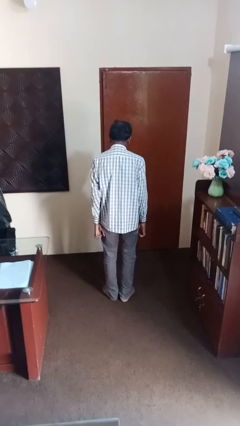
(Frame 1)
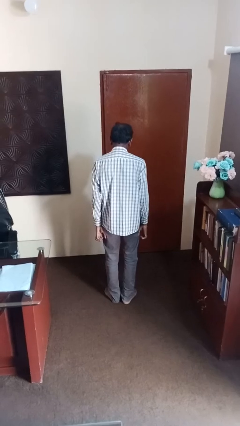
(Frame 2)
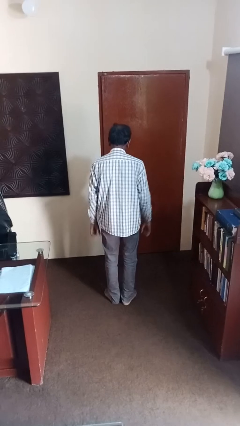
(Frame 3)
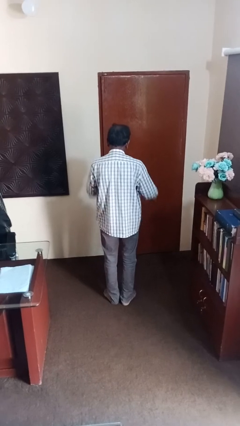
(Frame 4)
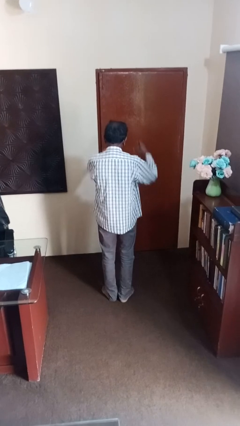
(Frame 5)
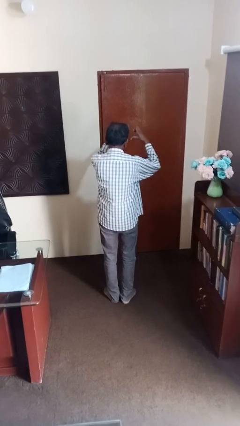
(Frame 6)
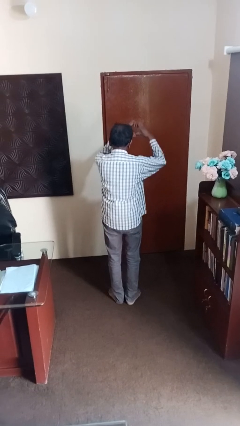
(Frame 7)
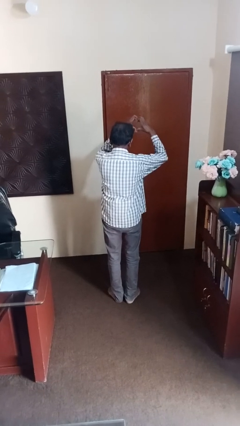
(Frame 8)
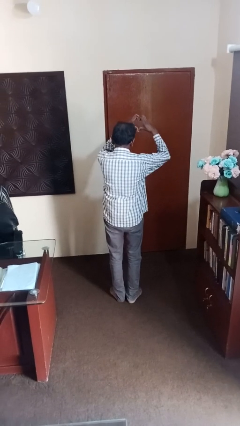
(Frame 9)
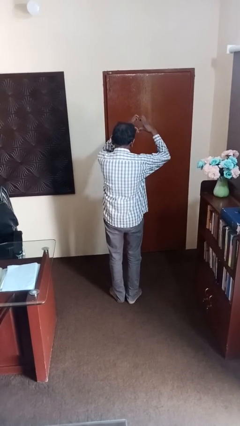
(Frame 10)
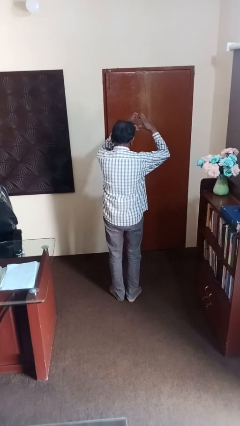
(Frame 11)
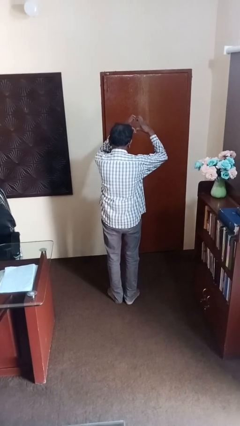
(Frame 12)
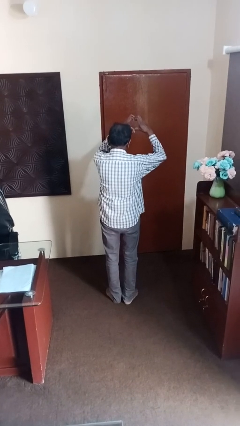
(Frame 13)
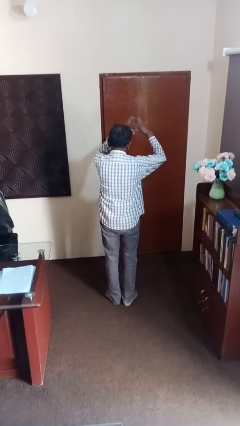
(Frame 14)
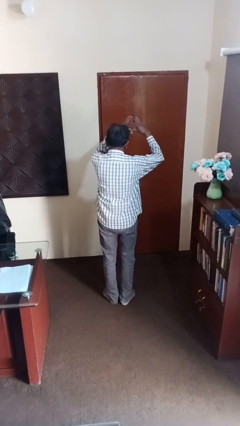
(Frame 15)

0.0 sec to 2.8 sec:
person gestures heart

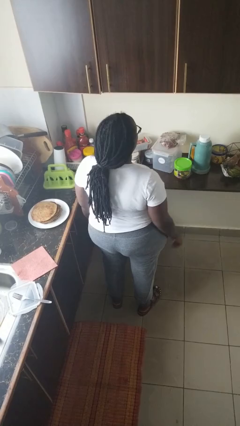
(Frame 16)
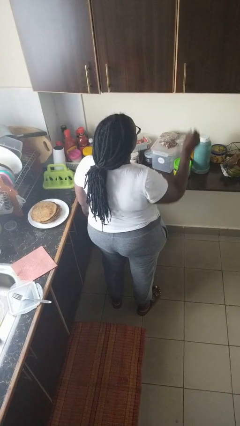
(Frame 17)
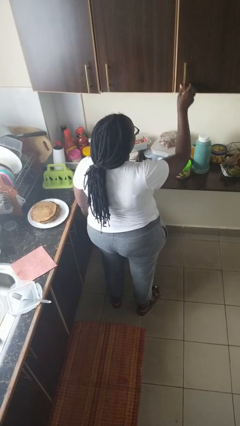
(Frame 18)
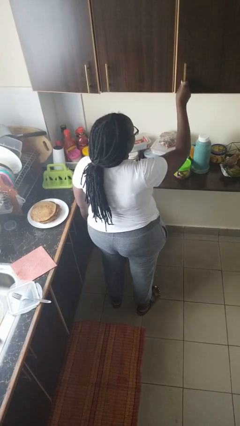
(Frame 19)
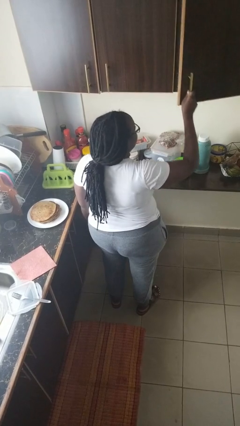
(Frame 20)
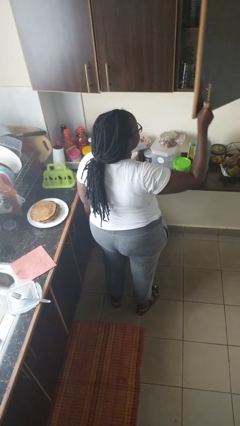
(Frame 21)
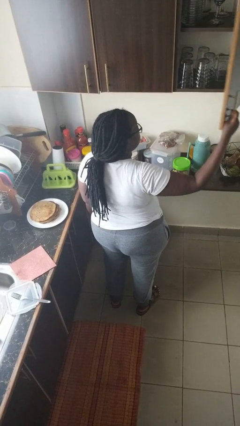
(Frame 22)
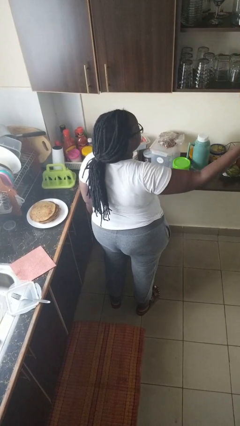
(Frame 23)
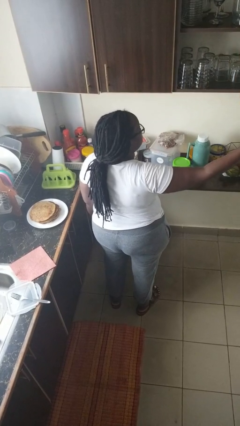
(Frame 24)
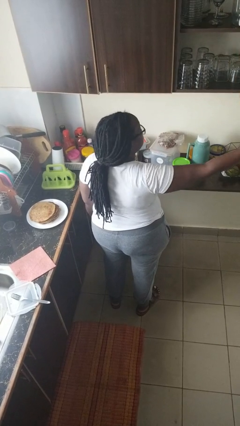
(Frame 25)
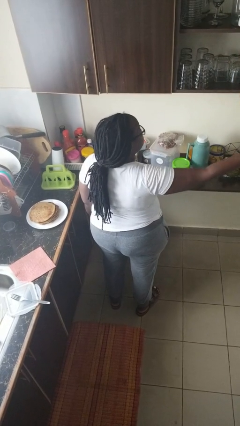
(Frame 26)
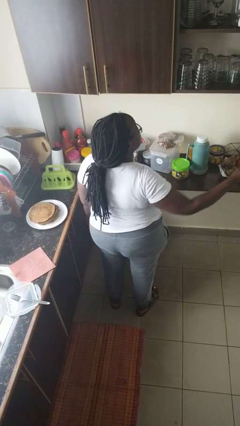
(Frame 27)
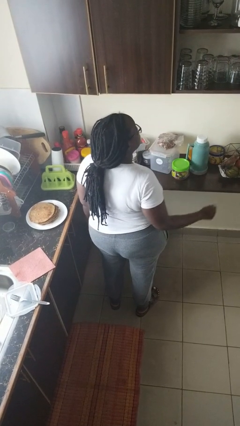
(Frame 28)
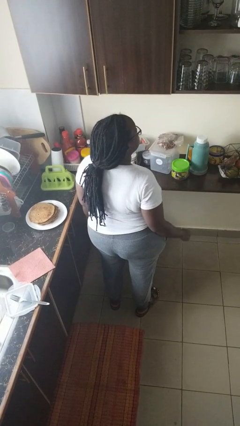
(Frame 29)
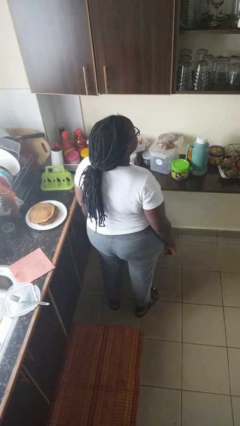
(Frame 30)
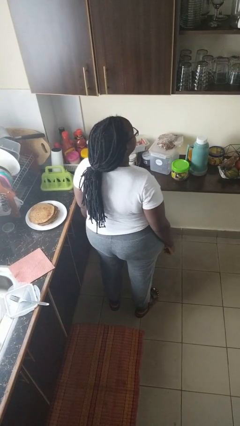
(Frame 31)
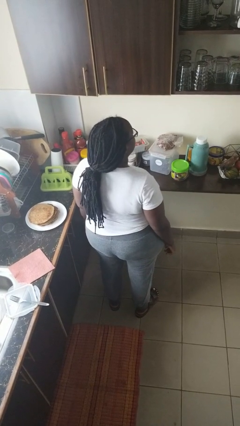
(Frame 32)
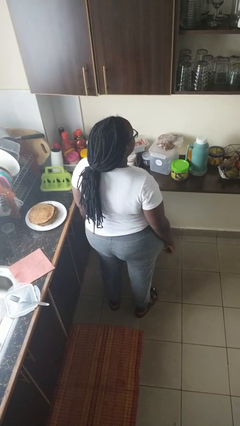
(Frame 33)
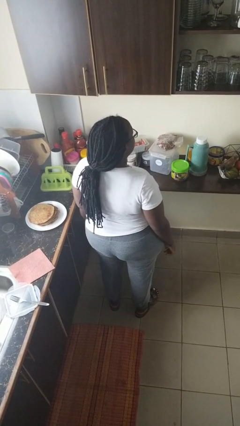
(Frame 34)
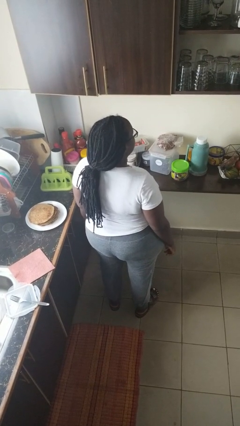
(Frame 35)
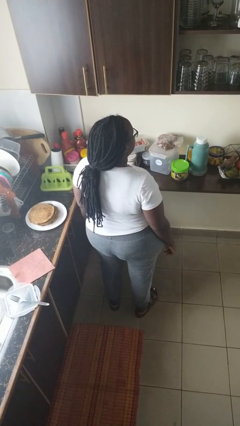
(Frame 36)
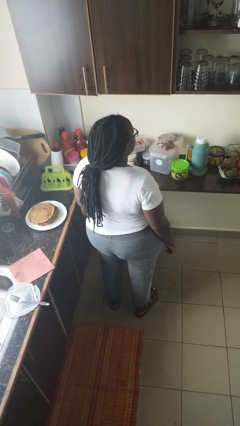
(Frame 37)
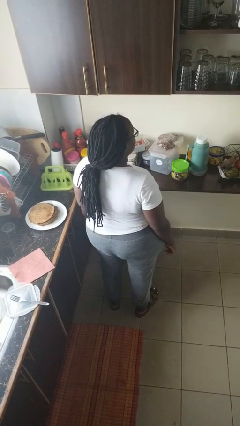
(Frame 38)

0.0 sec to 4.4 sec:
person opens cabinet

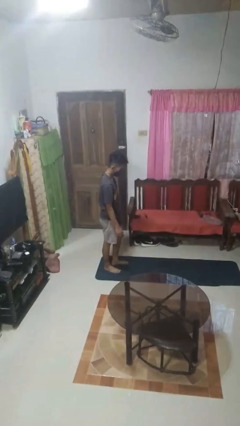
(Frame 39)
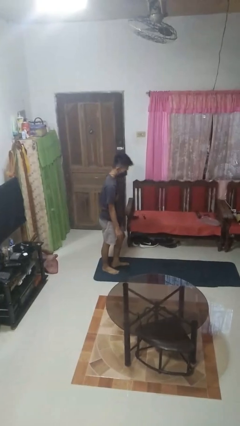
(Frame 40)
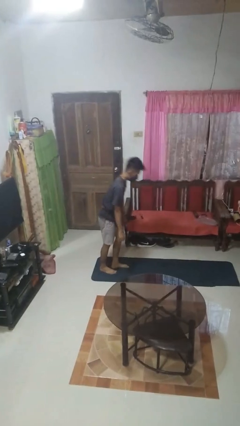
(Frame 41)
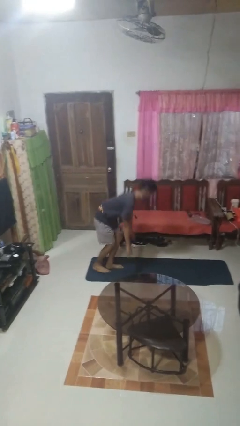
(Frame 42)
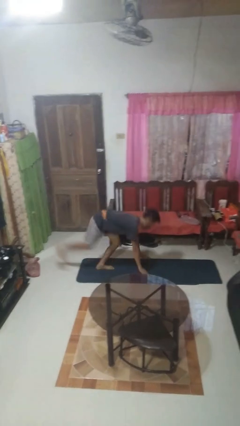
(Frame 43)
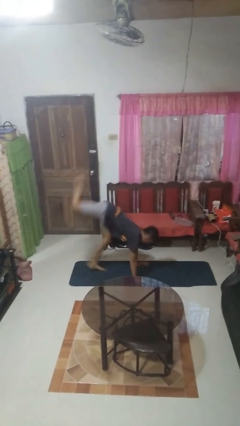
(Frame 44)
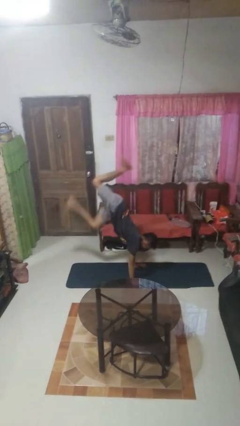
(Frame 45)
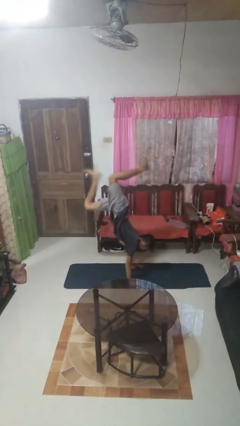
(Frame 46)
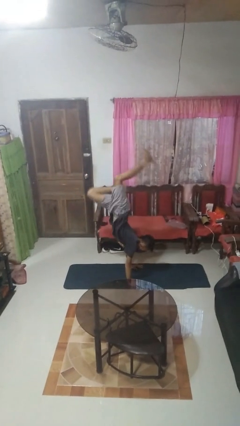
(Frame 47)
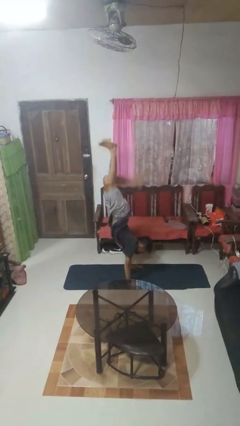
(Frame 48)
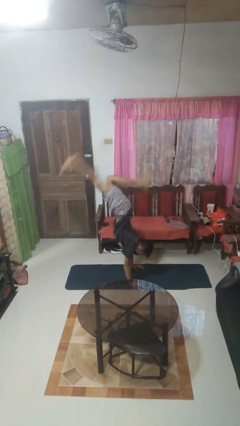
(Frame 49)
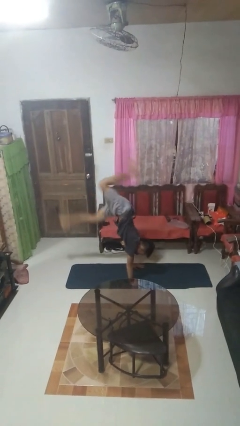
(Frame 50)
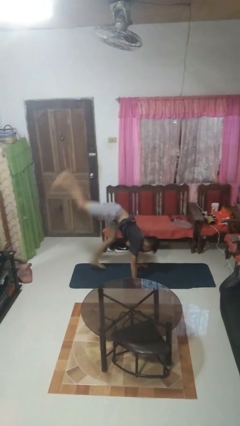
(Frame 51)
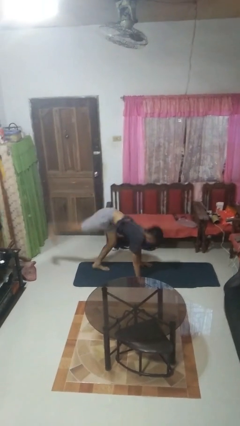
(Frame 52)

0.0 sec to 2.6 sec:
person handstand

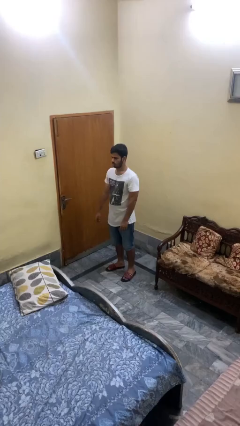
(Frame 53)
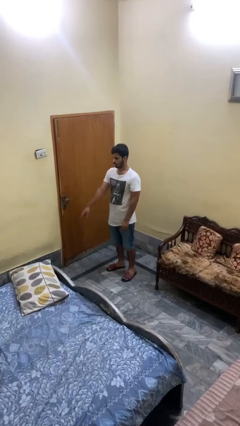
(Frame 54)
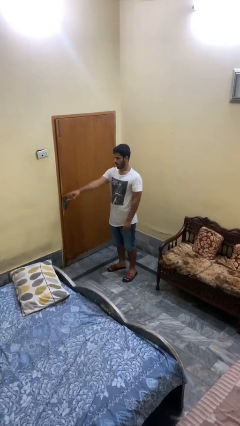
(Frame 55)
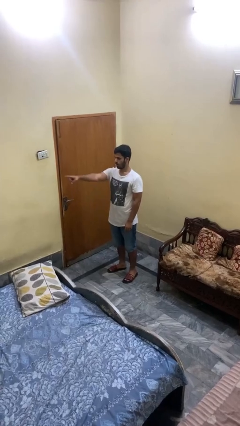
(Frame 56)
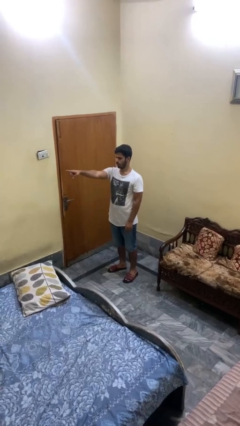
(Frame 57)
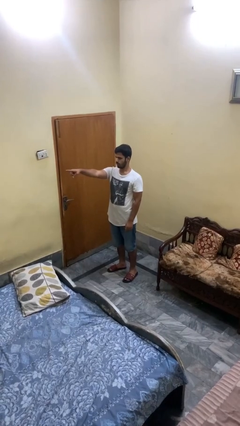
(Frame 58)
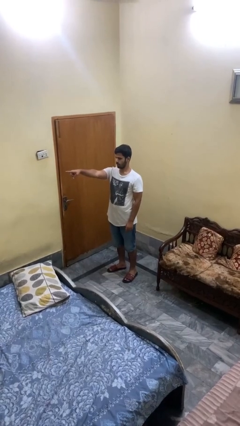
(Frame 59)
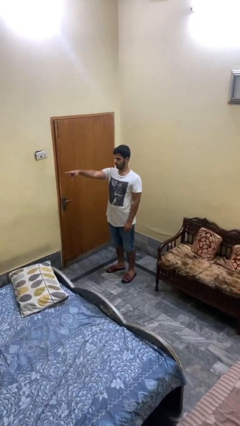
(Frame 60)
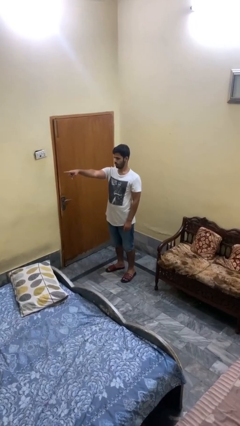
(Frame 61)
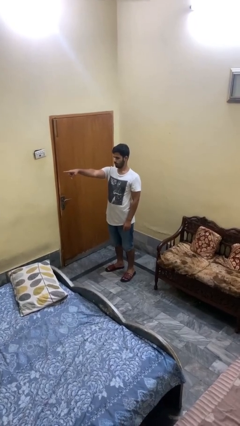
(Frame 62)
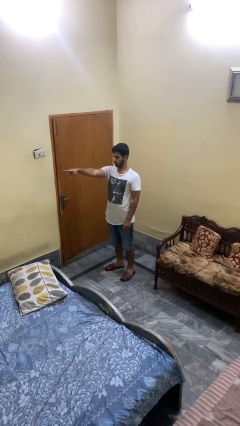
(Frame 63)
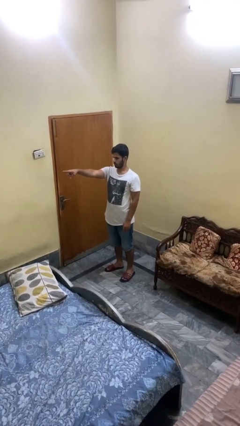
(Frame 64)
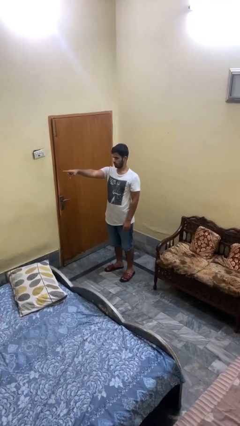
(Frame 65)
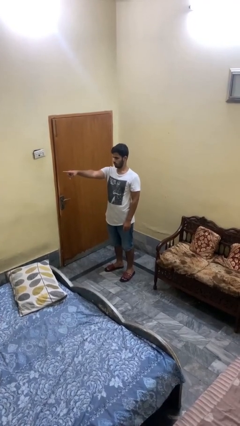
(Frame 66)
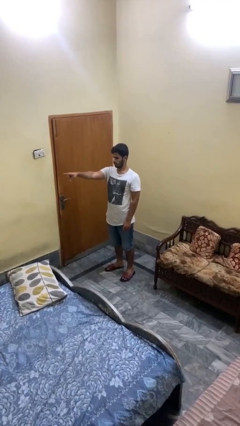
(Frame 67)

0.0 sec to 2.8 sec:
person points at person

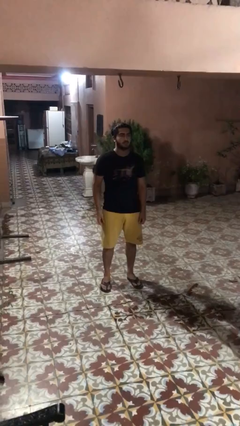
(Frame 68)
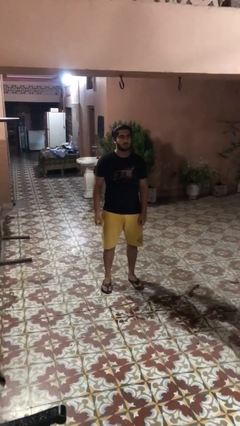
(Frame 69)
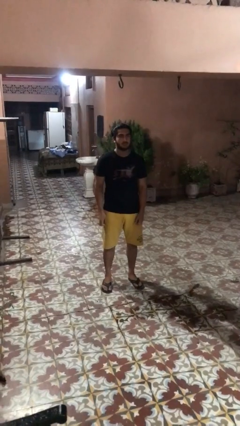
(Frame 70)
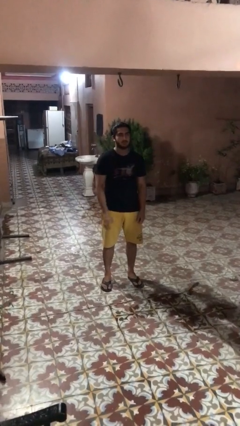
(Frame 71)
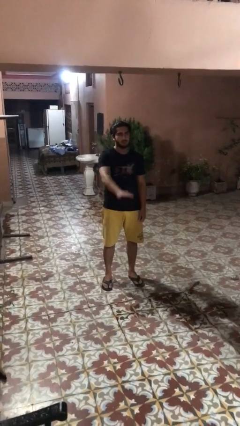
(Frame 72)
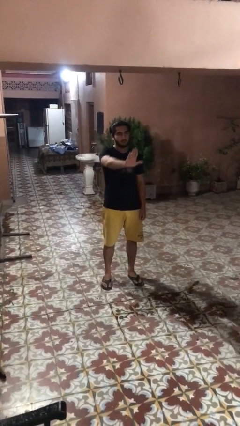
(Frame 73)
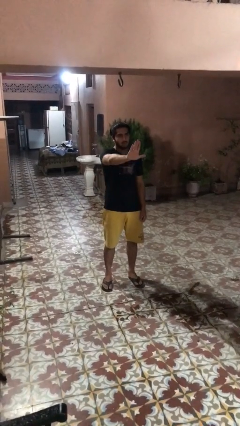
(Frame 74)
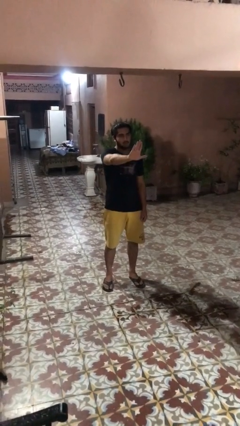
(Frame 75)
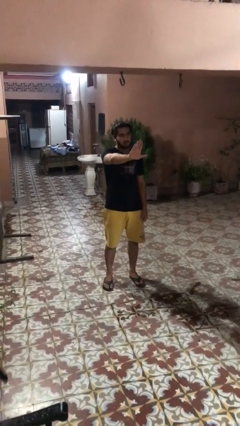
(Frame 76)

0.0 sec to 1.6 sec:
person gestures stop

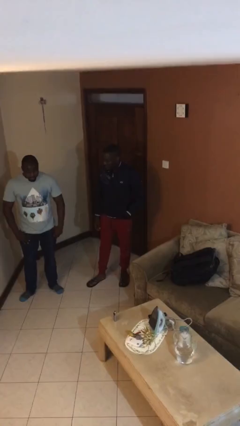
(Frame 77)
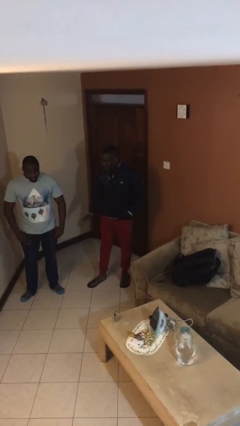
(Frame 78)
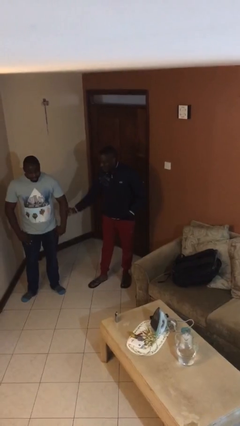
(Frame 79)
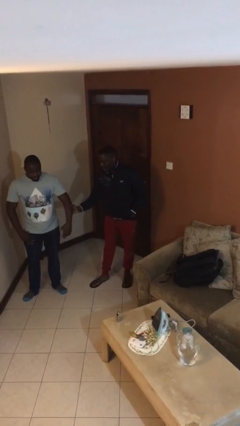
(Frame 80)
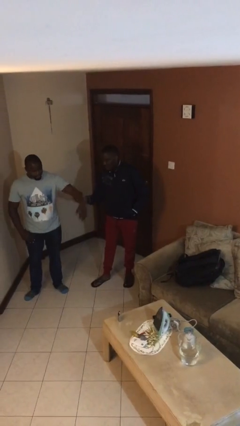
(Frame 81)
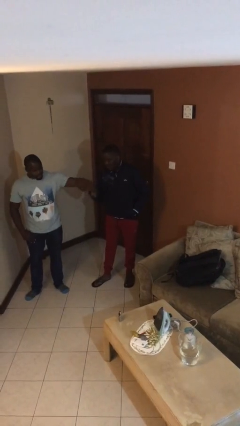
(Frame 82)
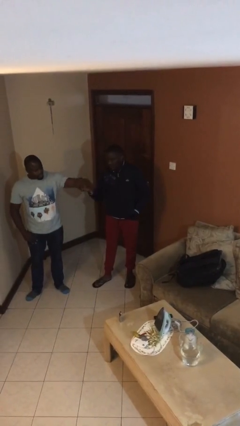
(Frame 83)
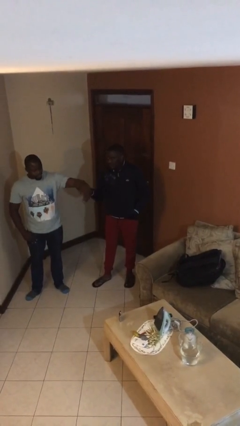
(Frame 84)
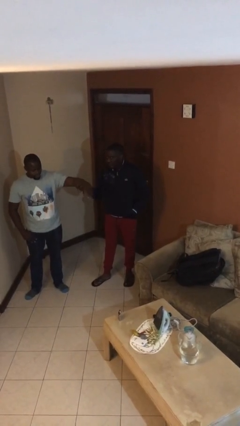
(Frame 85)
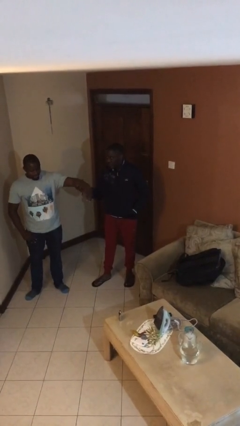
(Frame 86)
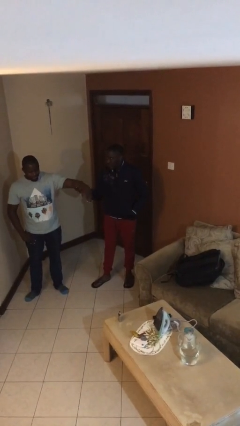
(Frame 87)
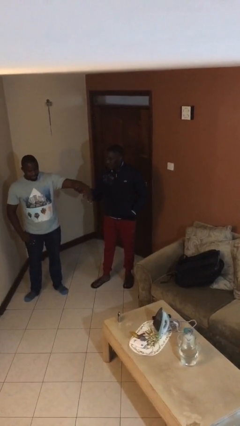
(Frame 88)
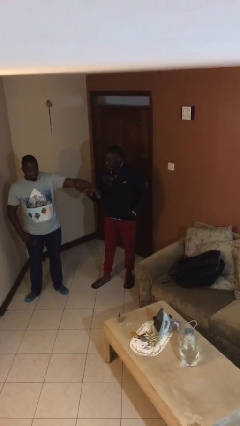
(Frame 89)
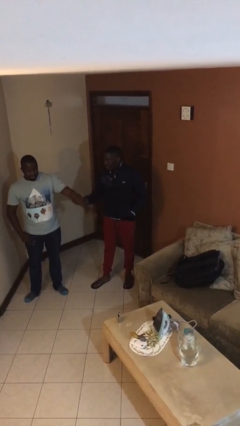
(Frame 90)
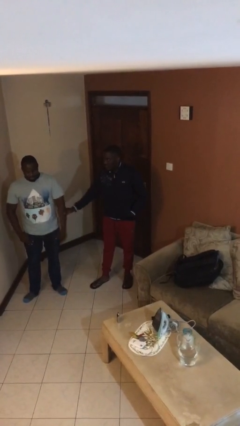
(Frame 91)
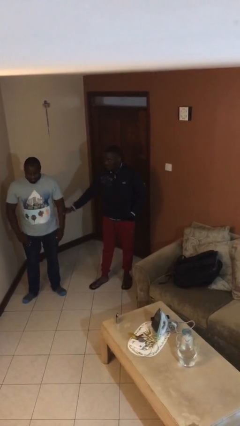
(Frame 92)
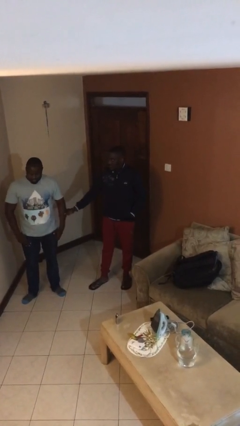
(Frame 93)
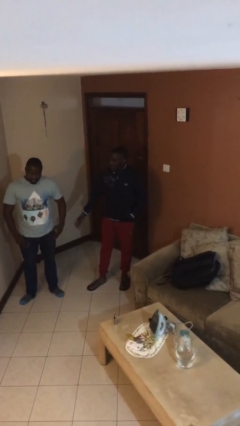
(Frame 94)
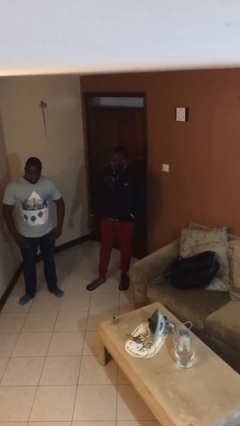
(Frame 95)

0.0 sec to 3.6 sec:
person grabs person by forearm
